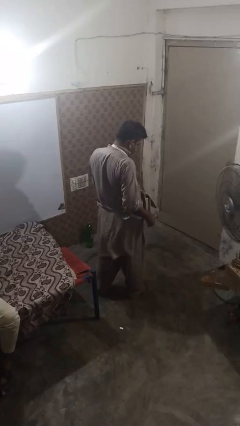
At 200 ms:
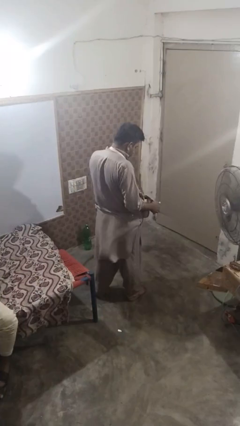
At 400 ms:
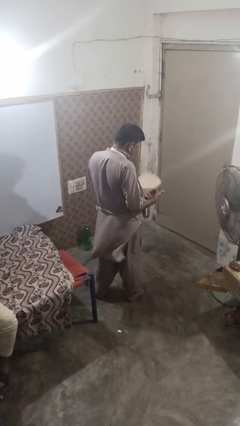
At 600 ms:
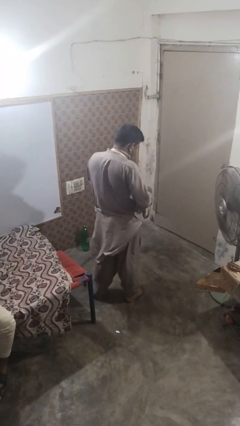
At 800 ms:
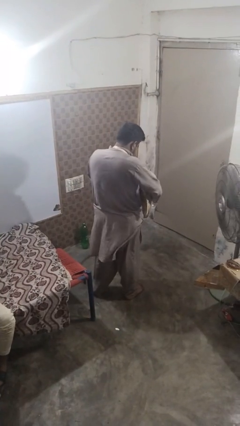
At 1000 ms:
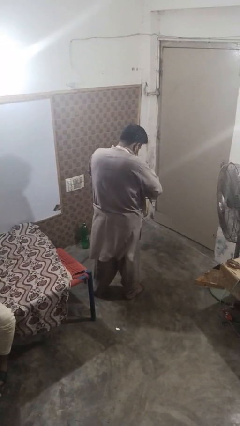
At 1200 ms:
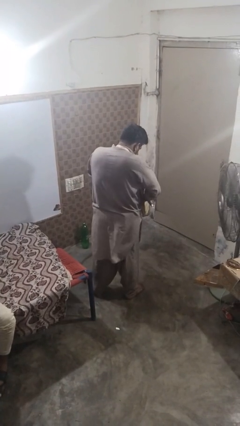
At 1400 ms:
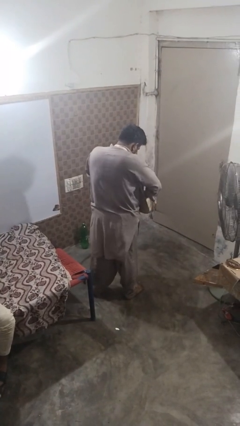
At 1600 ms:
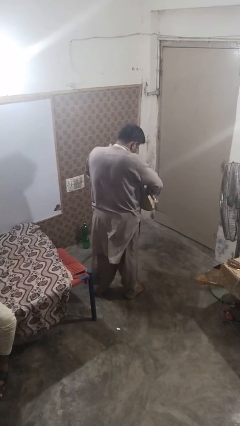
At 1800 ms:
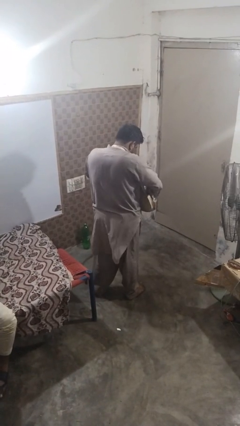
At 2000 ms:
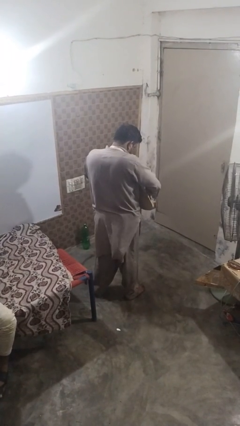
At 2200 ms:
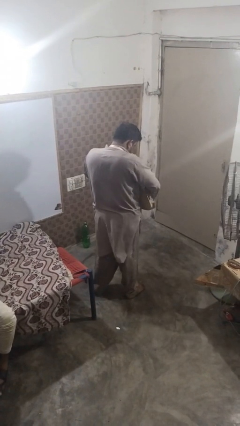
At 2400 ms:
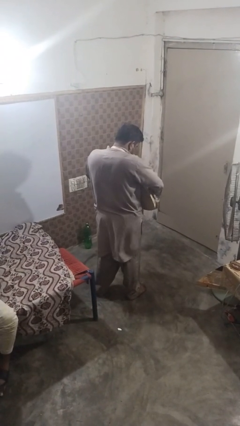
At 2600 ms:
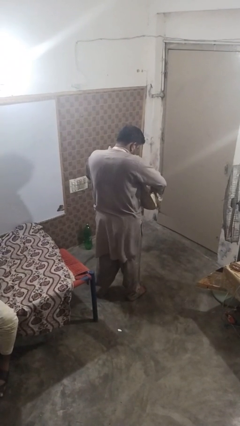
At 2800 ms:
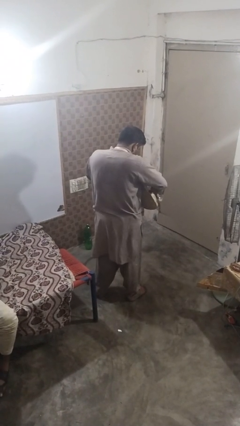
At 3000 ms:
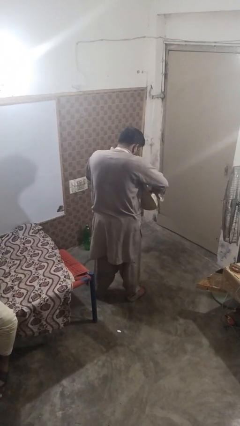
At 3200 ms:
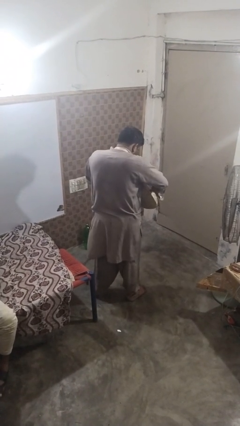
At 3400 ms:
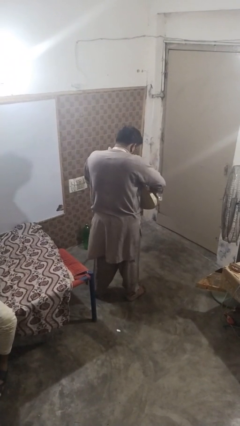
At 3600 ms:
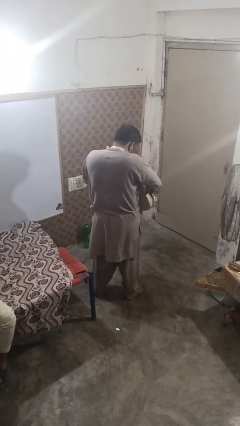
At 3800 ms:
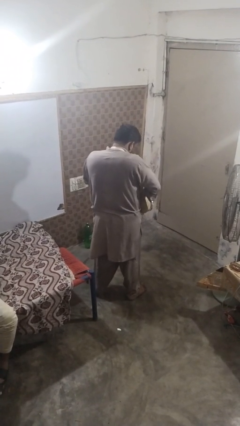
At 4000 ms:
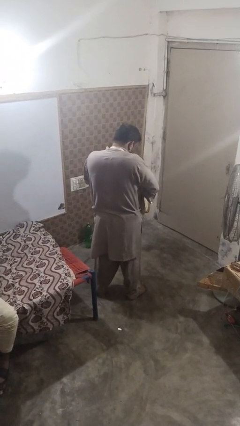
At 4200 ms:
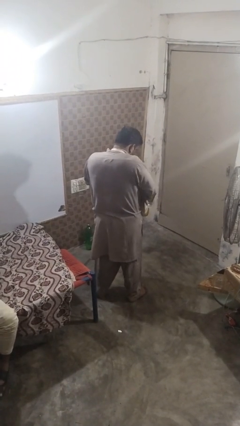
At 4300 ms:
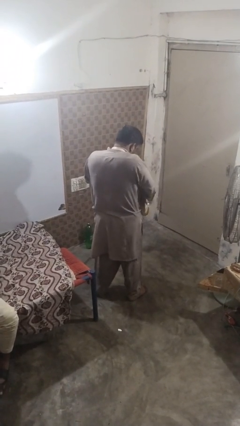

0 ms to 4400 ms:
person searches in purse

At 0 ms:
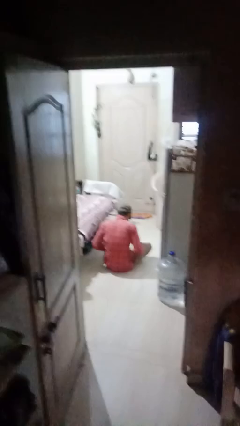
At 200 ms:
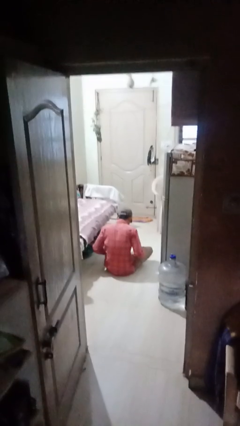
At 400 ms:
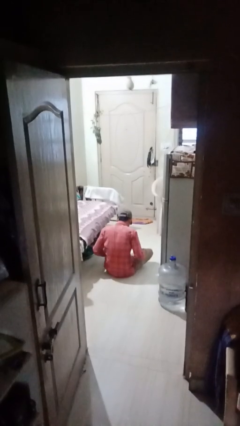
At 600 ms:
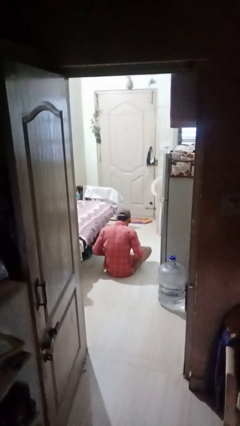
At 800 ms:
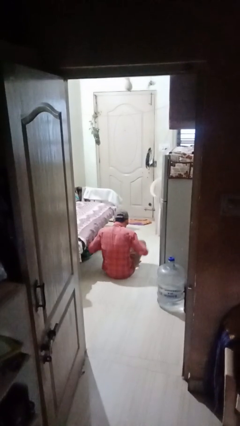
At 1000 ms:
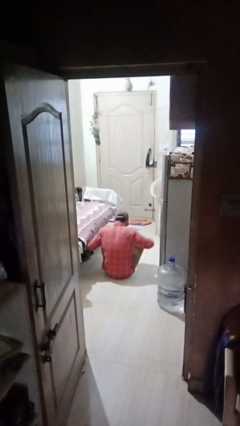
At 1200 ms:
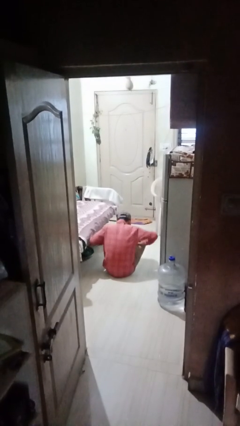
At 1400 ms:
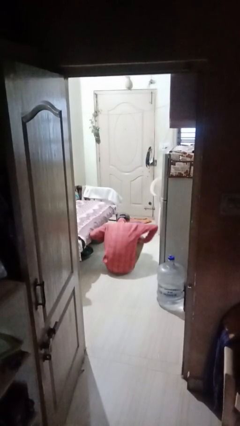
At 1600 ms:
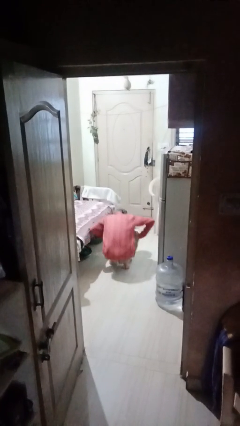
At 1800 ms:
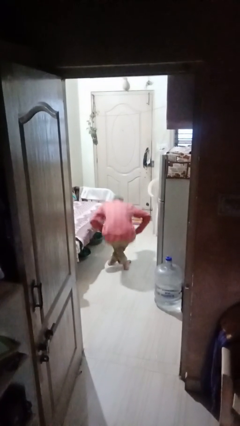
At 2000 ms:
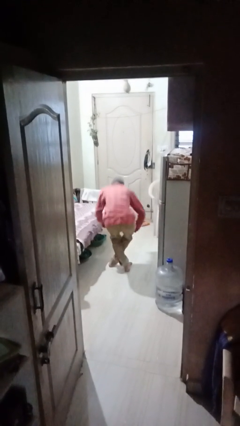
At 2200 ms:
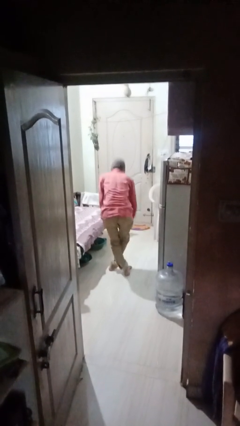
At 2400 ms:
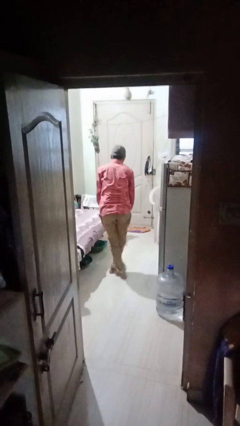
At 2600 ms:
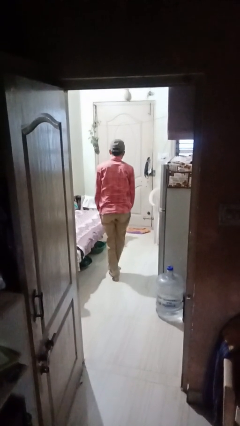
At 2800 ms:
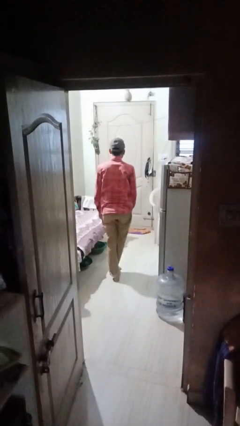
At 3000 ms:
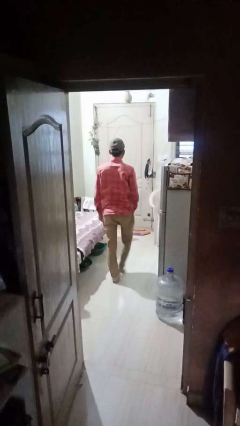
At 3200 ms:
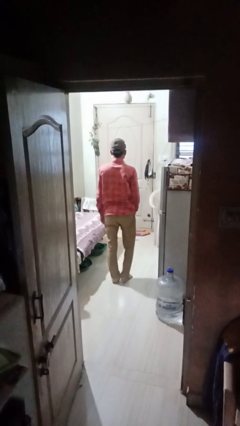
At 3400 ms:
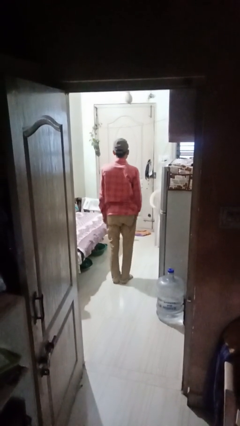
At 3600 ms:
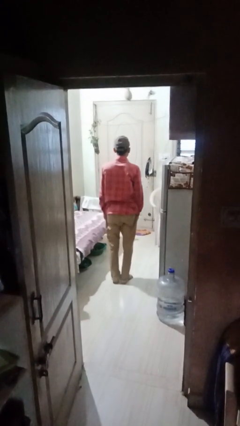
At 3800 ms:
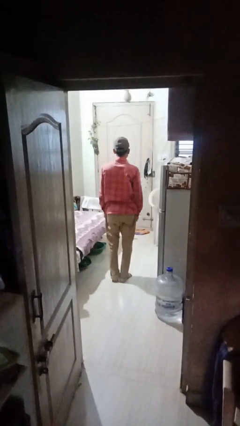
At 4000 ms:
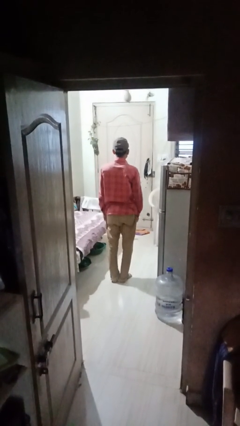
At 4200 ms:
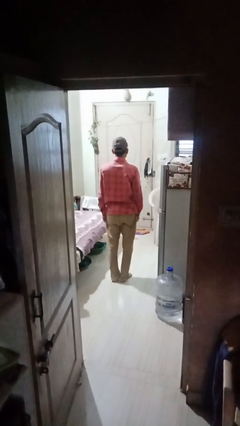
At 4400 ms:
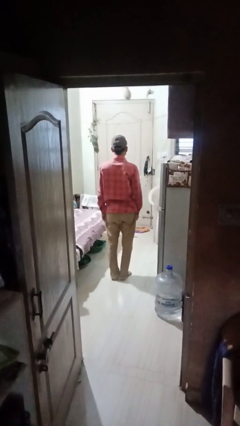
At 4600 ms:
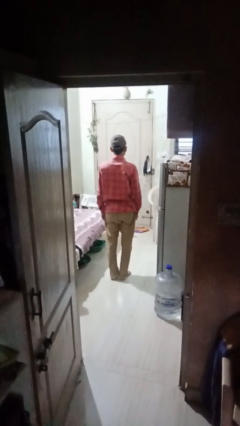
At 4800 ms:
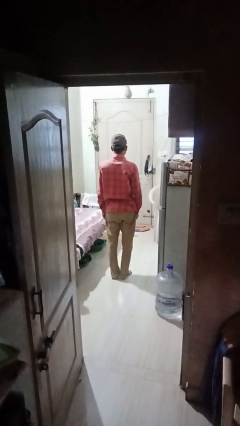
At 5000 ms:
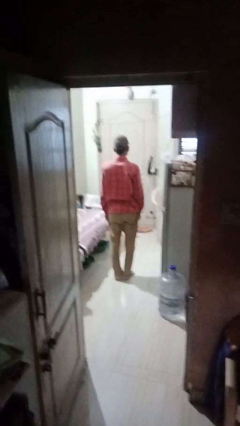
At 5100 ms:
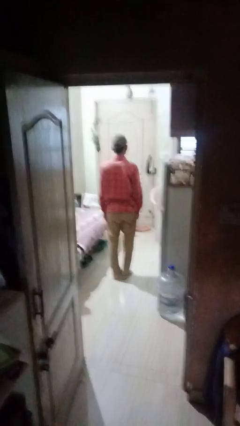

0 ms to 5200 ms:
person stands up from floor

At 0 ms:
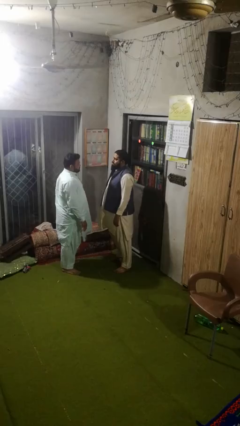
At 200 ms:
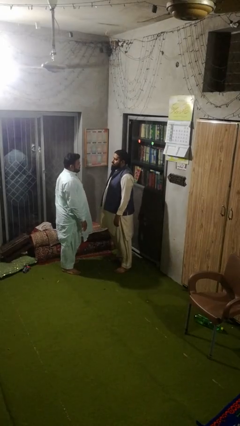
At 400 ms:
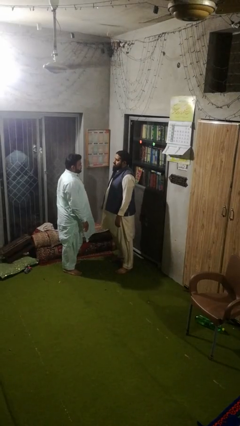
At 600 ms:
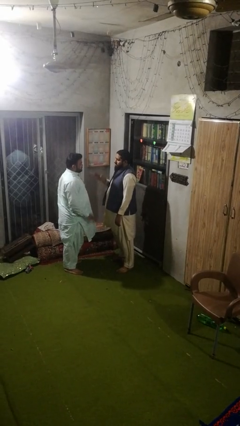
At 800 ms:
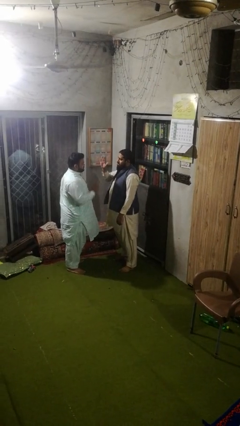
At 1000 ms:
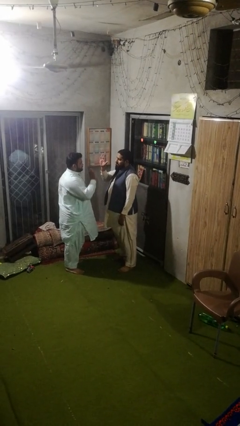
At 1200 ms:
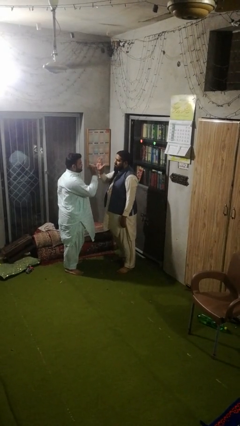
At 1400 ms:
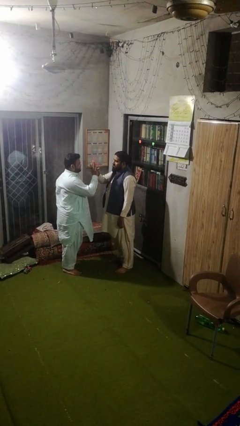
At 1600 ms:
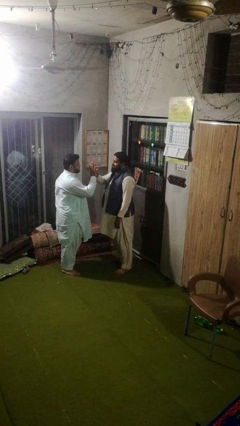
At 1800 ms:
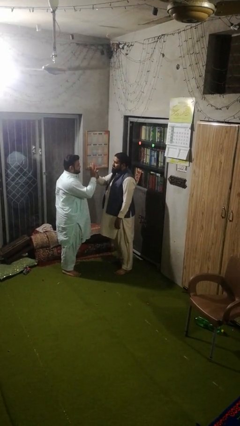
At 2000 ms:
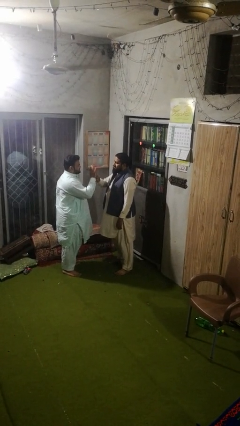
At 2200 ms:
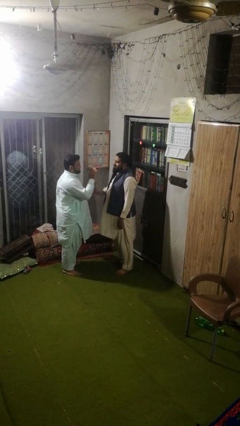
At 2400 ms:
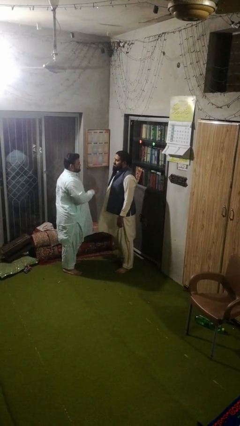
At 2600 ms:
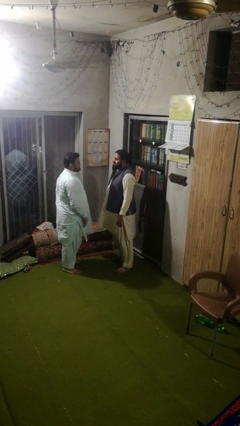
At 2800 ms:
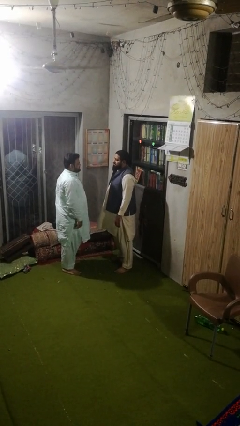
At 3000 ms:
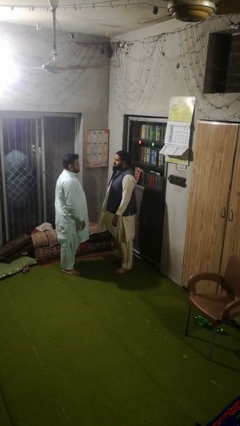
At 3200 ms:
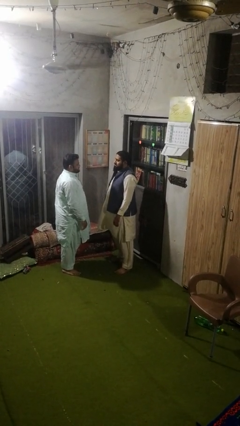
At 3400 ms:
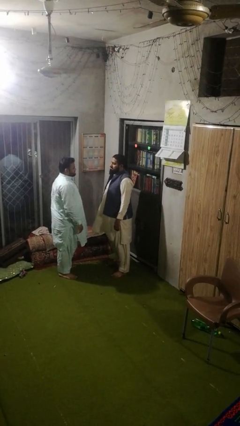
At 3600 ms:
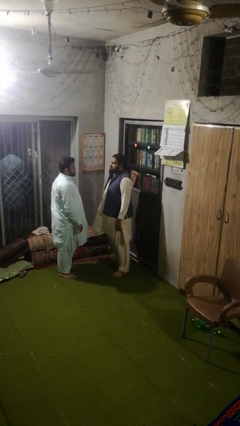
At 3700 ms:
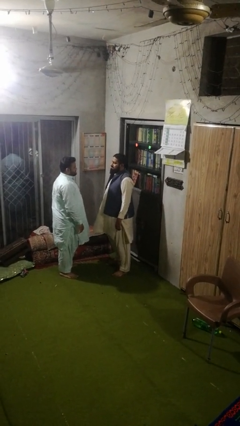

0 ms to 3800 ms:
person highfives hand

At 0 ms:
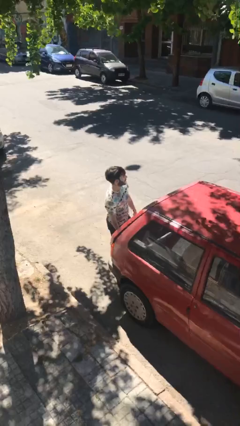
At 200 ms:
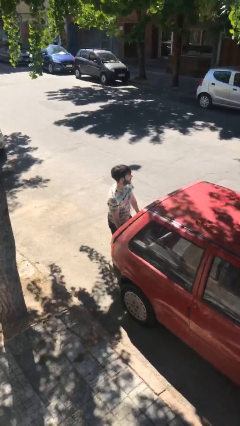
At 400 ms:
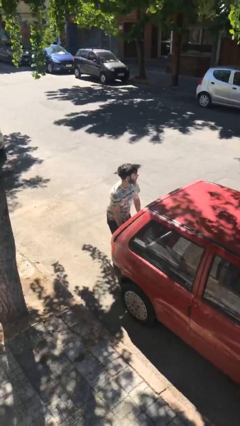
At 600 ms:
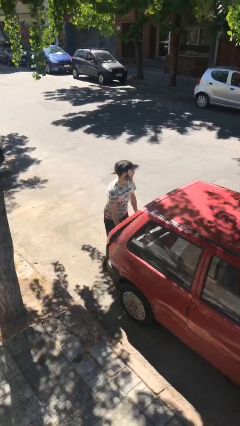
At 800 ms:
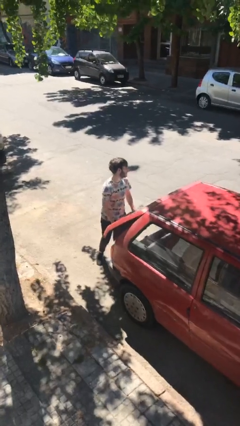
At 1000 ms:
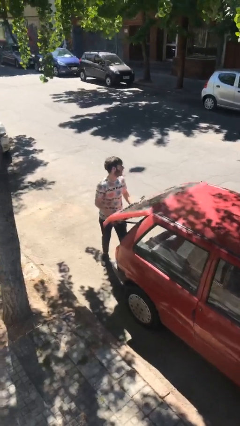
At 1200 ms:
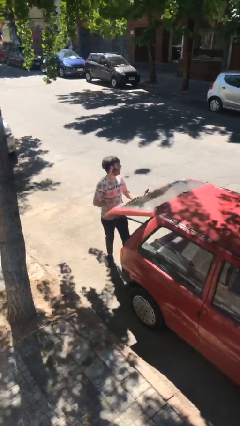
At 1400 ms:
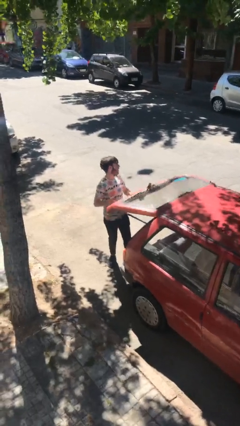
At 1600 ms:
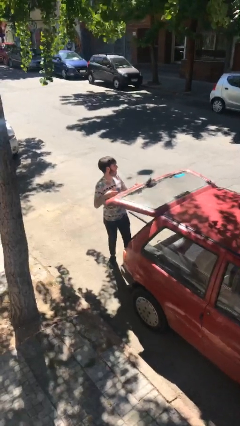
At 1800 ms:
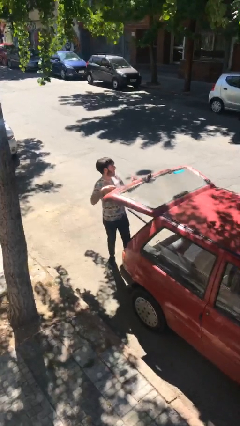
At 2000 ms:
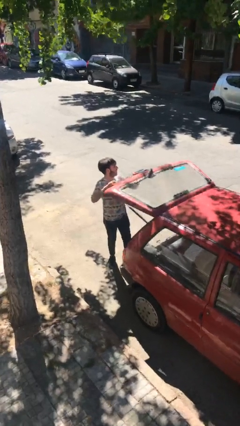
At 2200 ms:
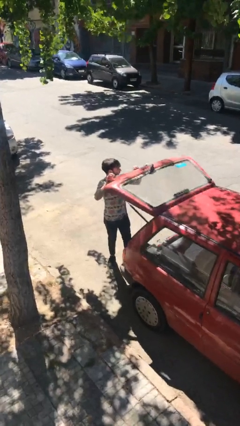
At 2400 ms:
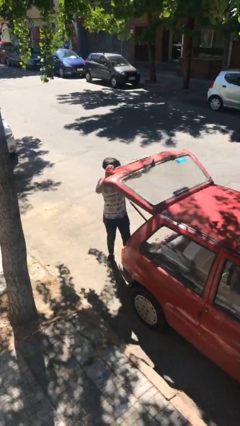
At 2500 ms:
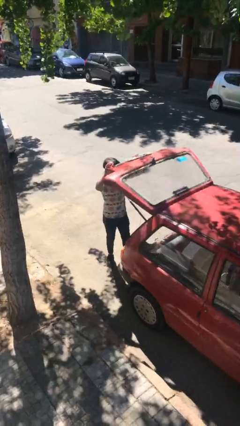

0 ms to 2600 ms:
person opens car trunk

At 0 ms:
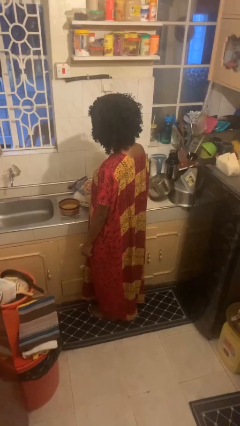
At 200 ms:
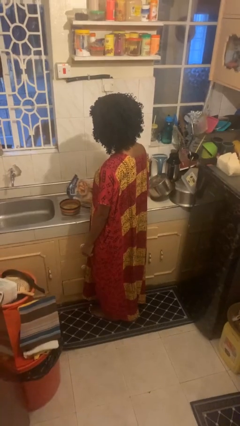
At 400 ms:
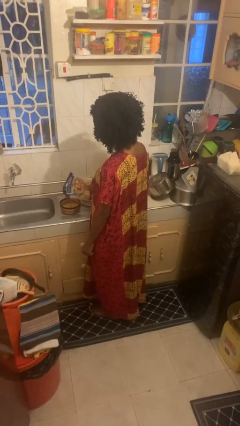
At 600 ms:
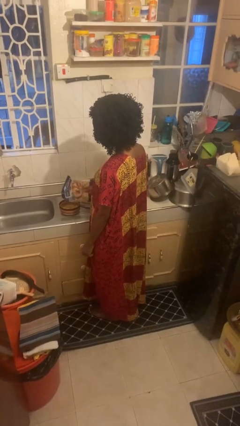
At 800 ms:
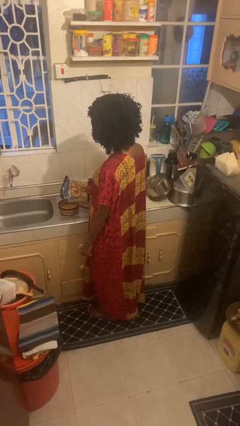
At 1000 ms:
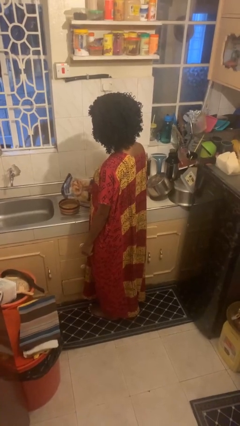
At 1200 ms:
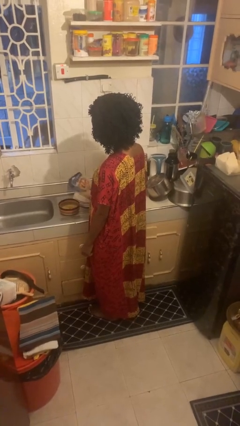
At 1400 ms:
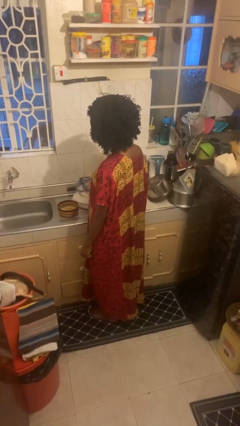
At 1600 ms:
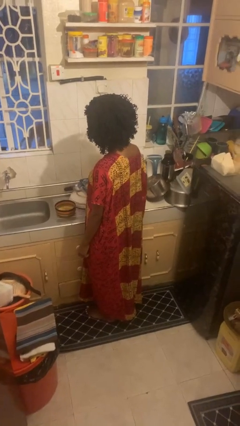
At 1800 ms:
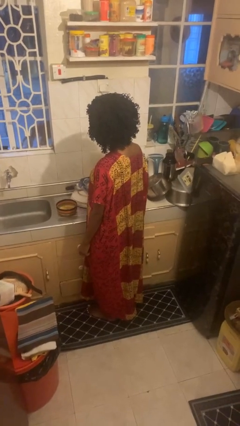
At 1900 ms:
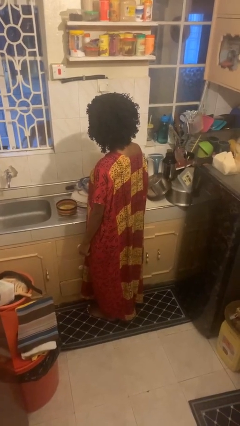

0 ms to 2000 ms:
person pours into bowl
